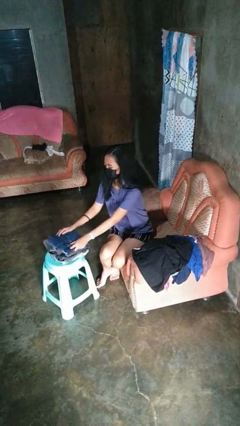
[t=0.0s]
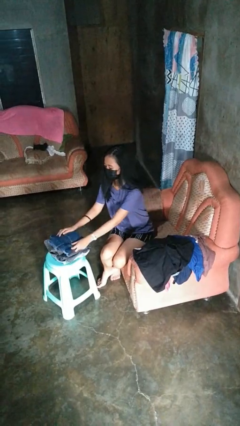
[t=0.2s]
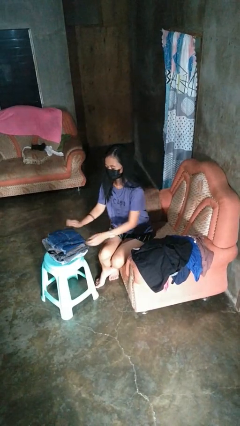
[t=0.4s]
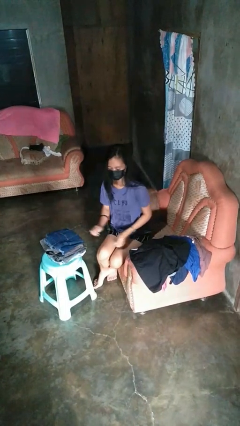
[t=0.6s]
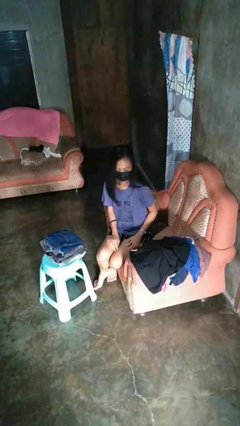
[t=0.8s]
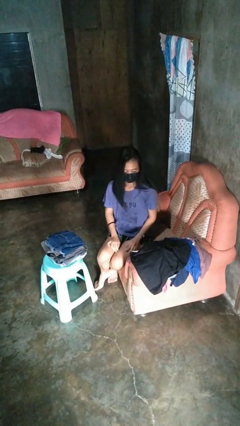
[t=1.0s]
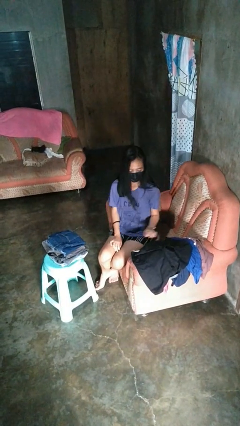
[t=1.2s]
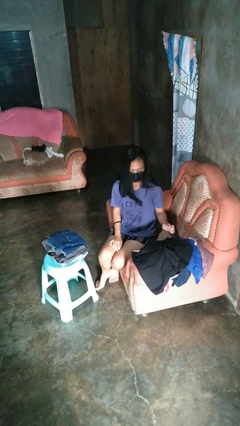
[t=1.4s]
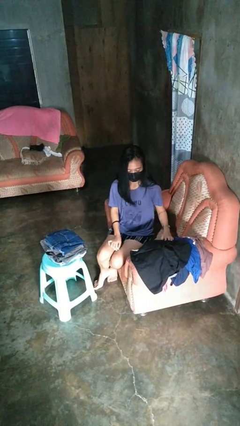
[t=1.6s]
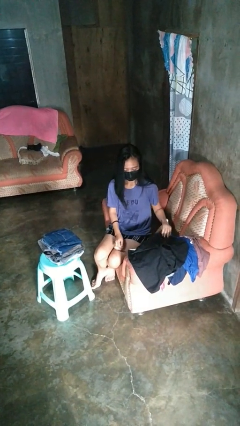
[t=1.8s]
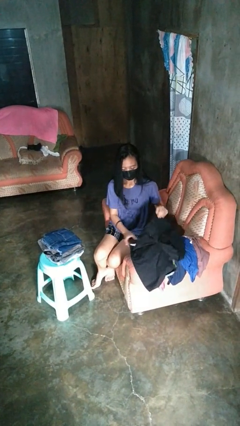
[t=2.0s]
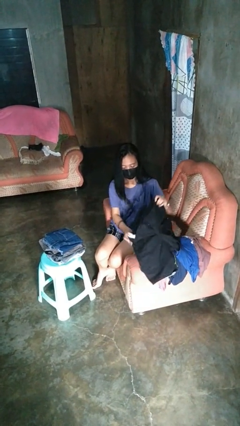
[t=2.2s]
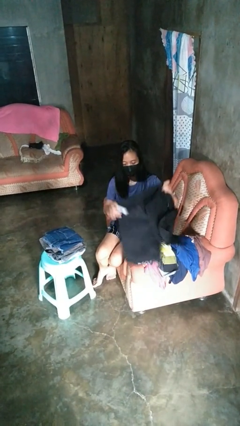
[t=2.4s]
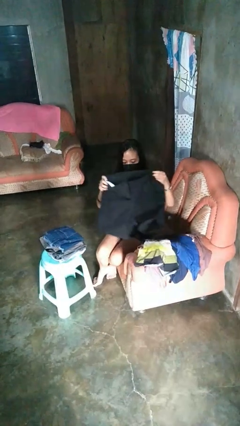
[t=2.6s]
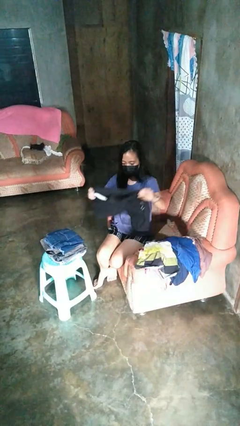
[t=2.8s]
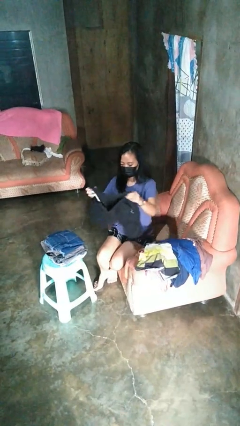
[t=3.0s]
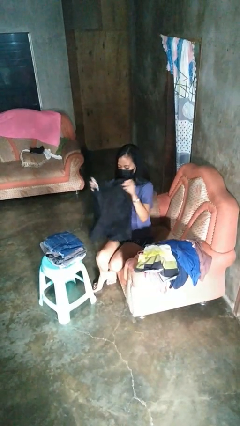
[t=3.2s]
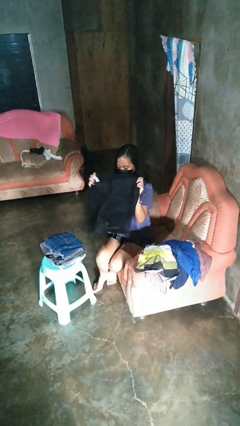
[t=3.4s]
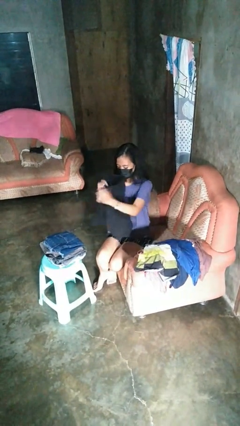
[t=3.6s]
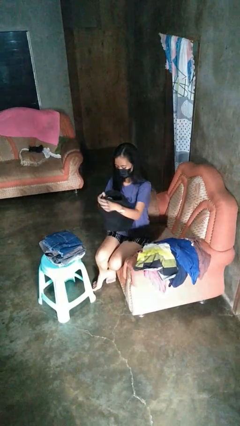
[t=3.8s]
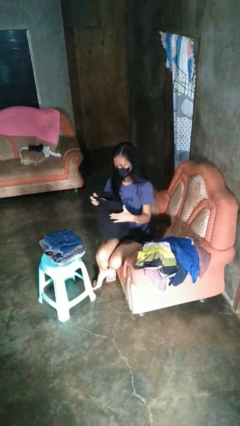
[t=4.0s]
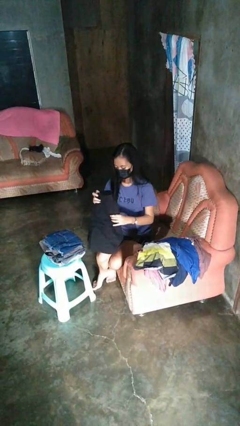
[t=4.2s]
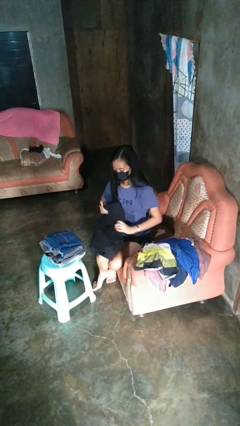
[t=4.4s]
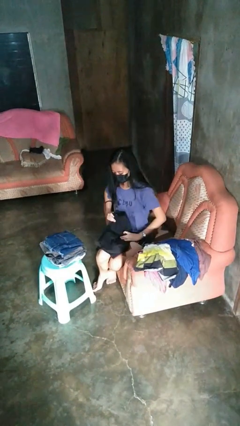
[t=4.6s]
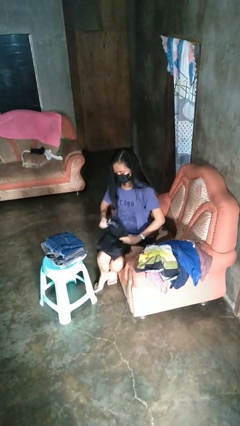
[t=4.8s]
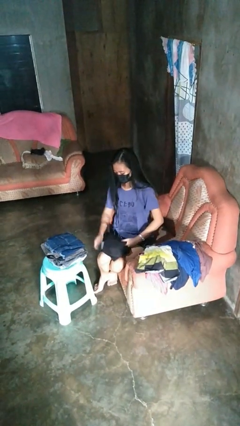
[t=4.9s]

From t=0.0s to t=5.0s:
person folds pants

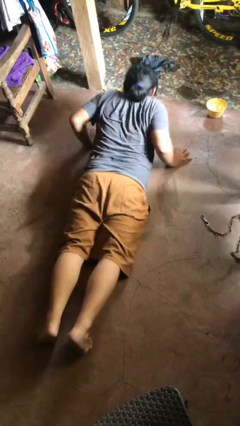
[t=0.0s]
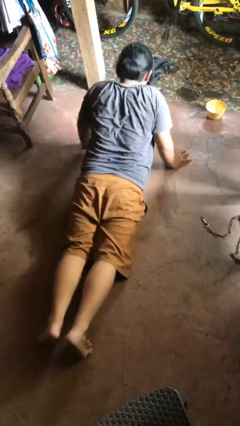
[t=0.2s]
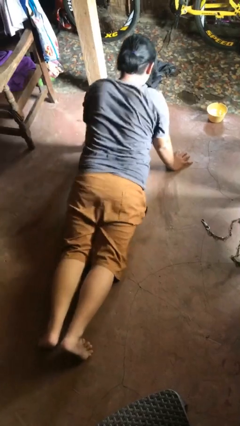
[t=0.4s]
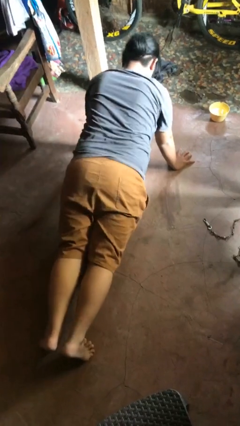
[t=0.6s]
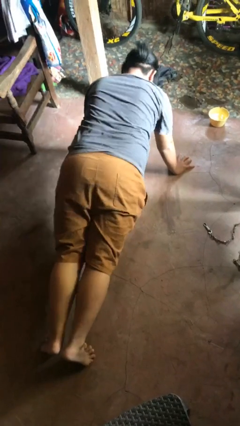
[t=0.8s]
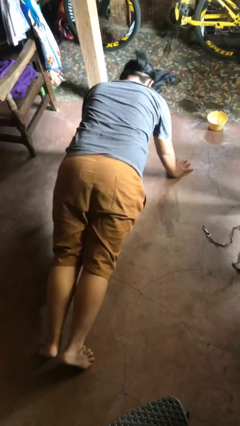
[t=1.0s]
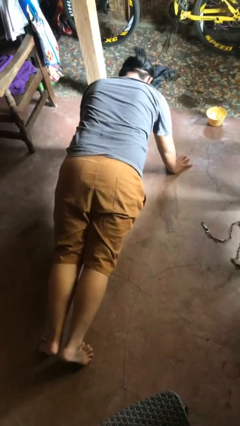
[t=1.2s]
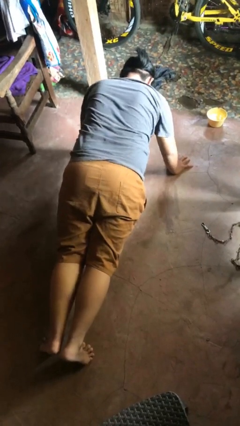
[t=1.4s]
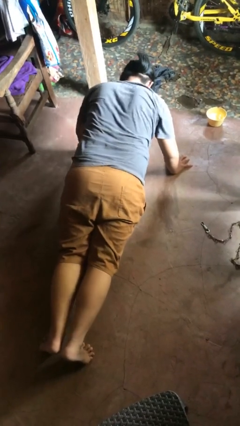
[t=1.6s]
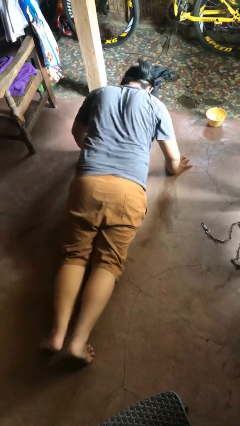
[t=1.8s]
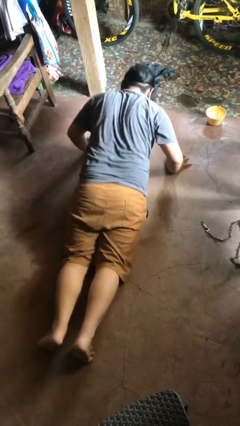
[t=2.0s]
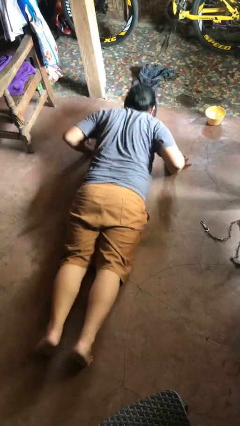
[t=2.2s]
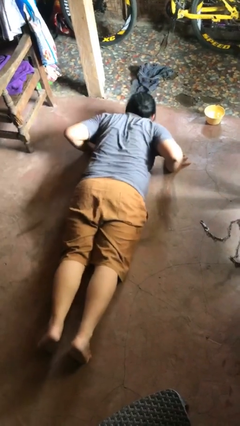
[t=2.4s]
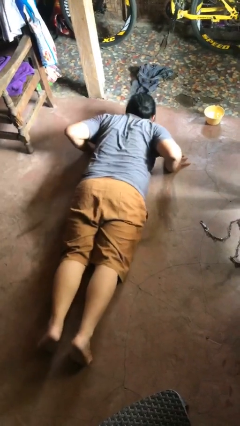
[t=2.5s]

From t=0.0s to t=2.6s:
person exercises with pushup

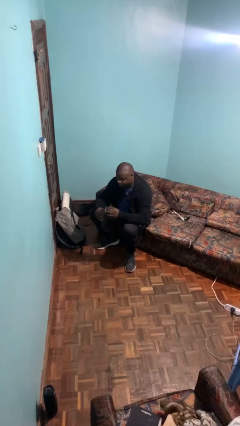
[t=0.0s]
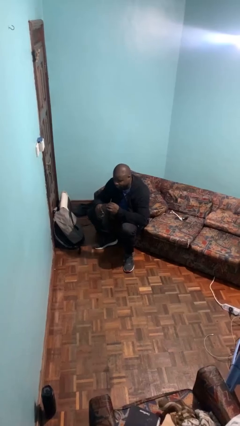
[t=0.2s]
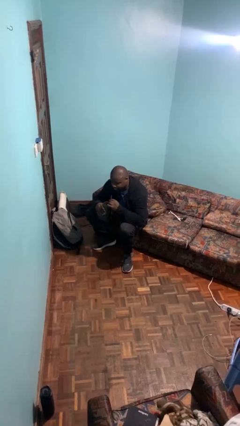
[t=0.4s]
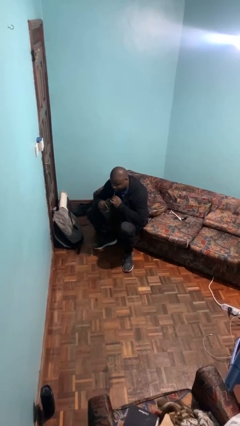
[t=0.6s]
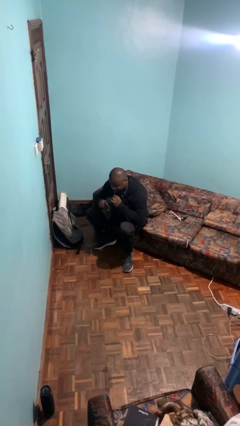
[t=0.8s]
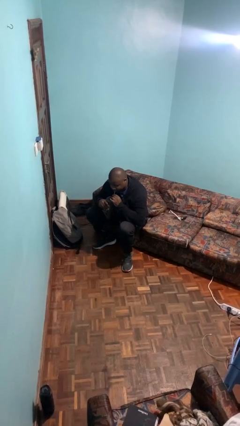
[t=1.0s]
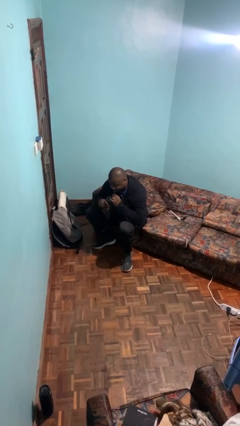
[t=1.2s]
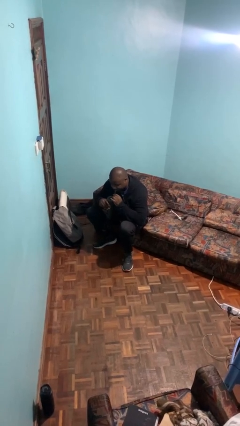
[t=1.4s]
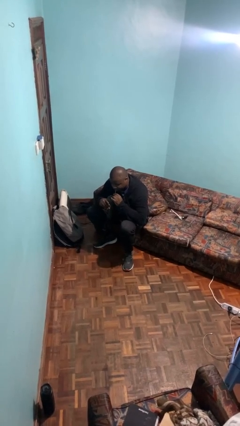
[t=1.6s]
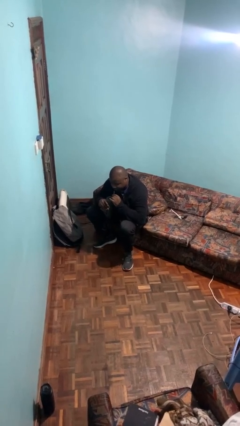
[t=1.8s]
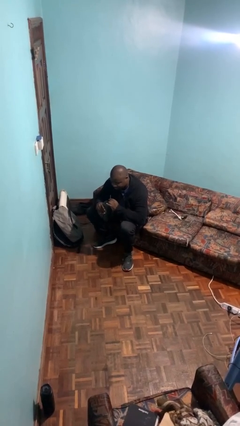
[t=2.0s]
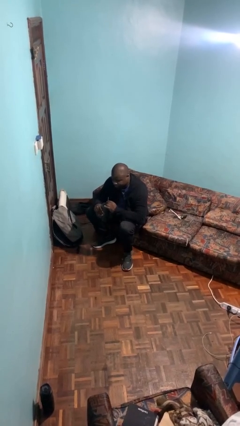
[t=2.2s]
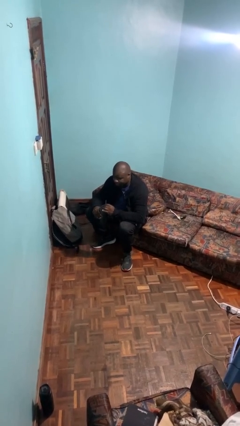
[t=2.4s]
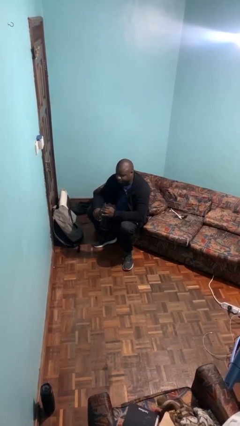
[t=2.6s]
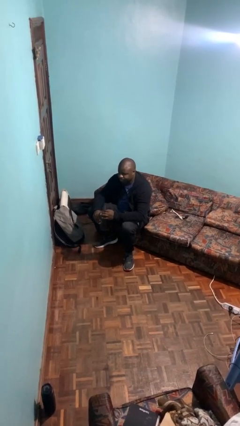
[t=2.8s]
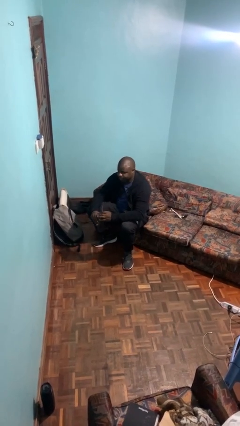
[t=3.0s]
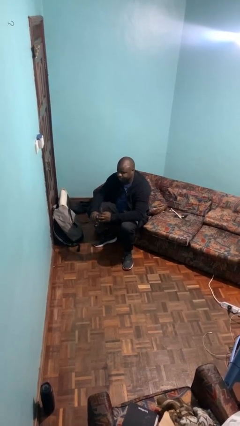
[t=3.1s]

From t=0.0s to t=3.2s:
person drinks from straw

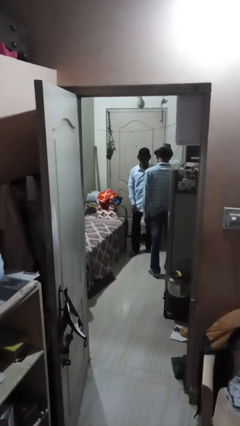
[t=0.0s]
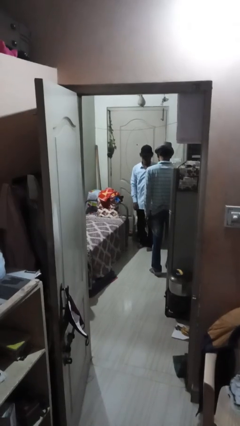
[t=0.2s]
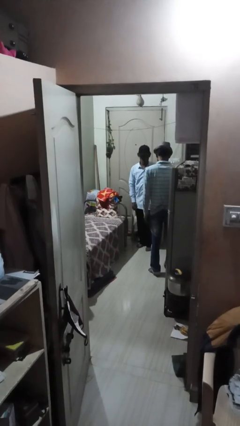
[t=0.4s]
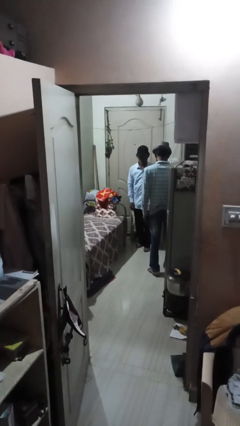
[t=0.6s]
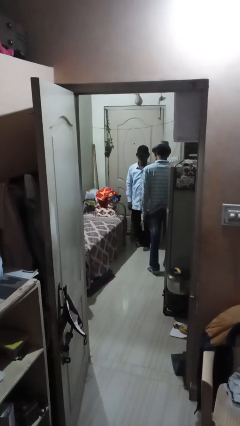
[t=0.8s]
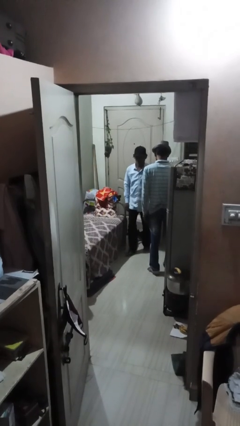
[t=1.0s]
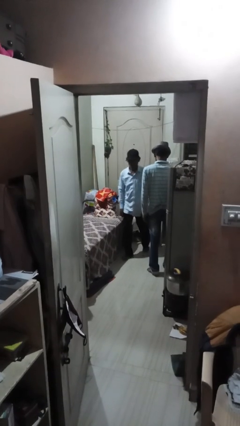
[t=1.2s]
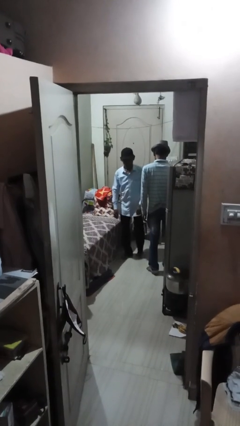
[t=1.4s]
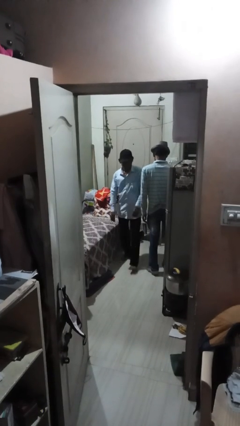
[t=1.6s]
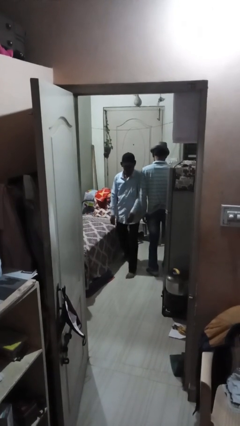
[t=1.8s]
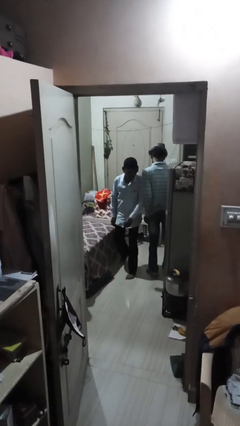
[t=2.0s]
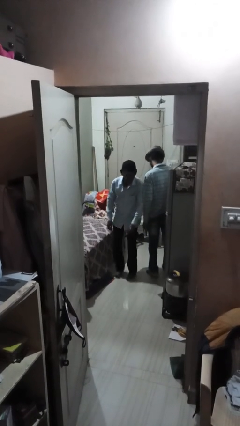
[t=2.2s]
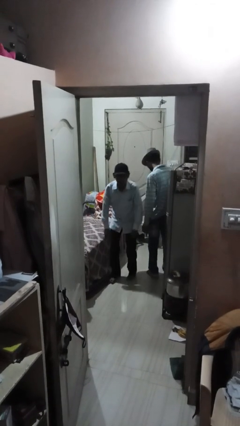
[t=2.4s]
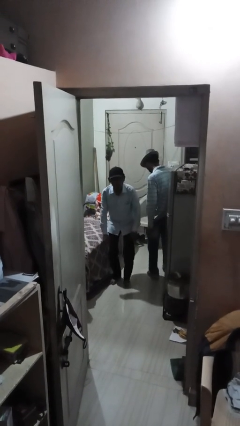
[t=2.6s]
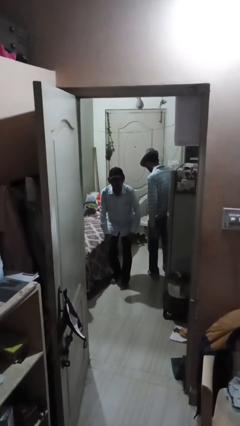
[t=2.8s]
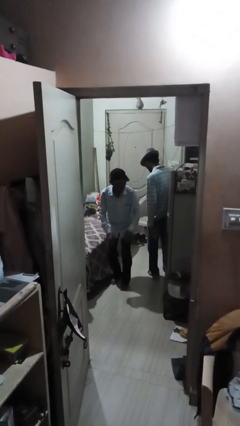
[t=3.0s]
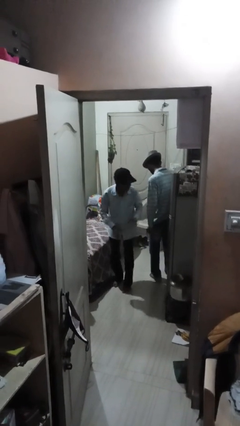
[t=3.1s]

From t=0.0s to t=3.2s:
person bumps into person

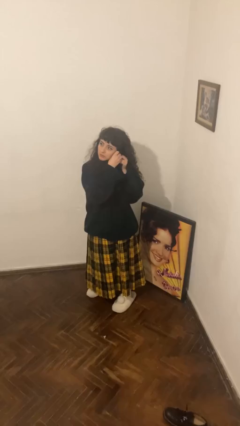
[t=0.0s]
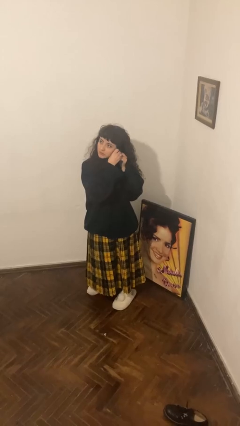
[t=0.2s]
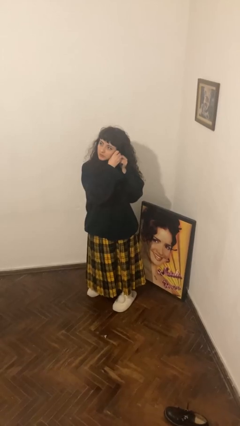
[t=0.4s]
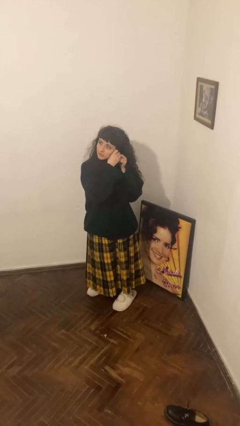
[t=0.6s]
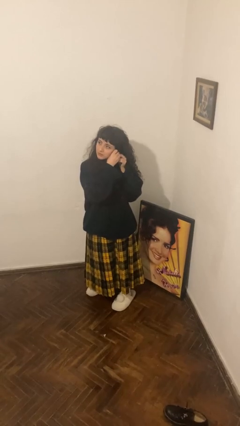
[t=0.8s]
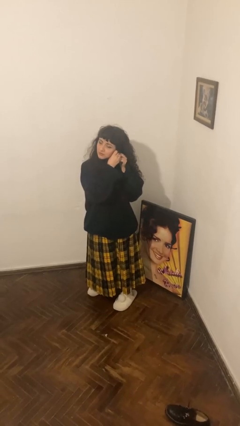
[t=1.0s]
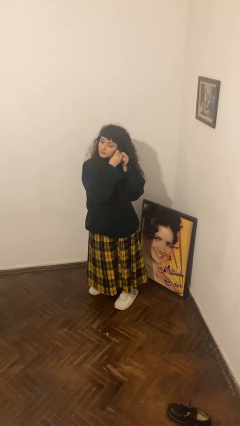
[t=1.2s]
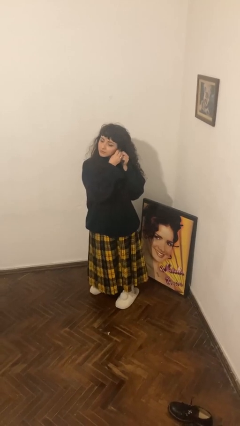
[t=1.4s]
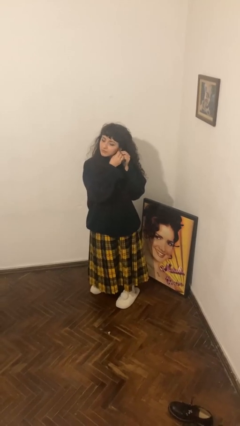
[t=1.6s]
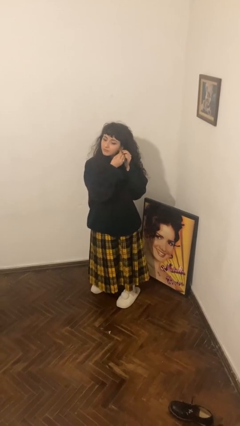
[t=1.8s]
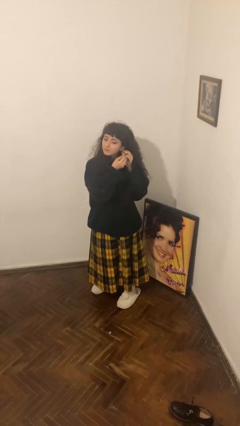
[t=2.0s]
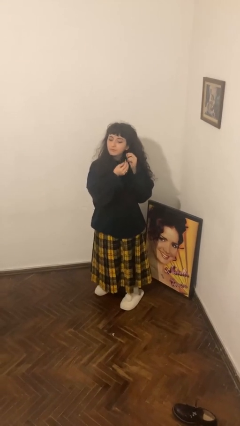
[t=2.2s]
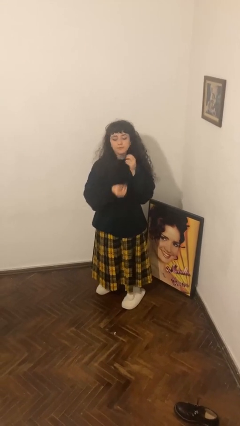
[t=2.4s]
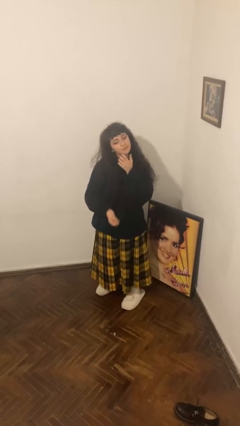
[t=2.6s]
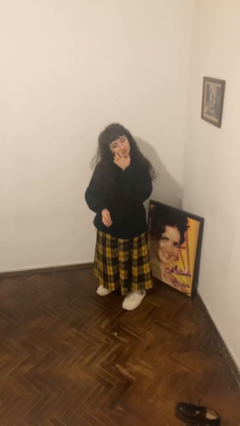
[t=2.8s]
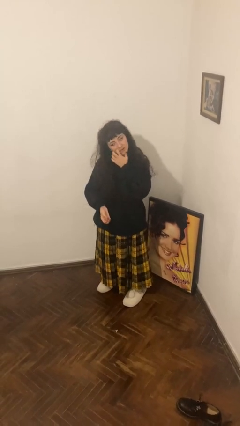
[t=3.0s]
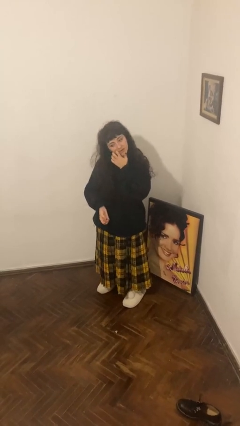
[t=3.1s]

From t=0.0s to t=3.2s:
person takes off earrings
